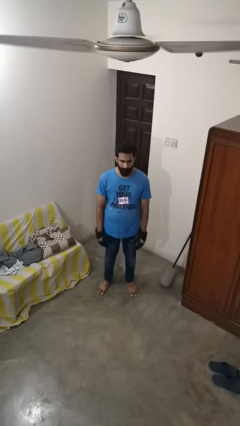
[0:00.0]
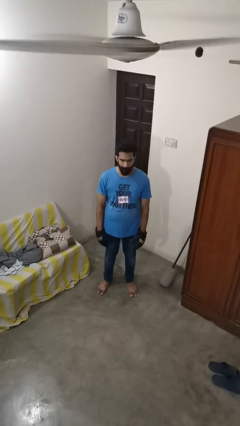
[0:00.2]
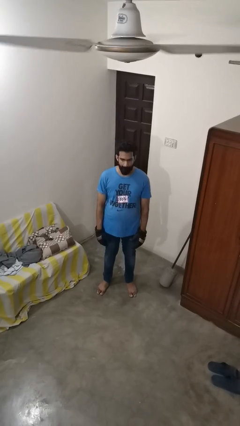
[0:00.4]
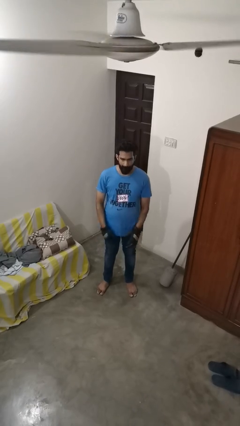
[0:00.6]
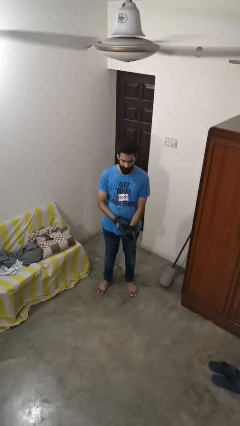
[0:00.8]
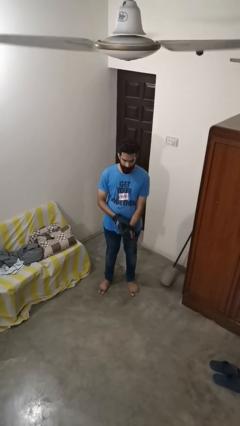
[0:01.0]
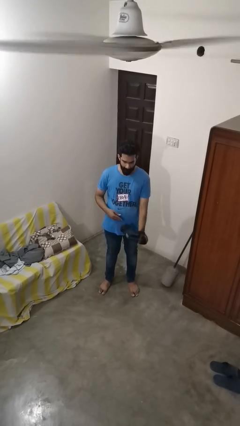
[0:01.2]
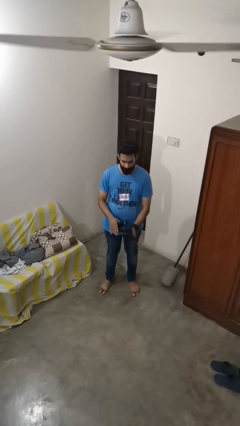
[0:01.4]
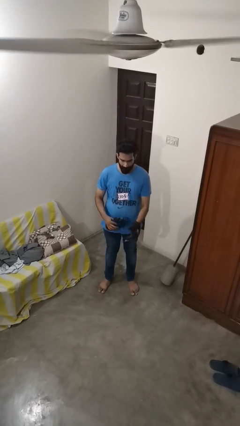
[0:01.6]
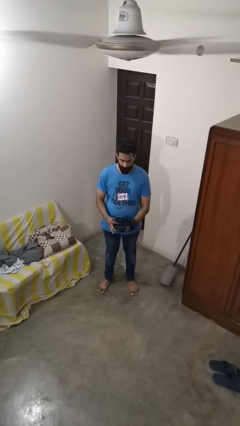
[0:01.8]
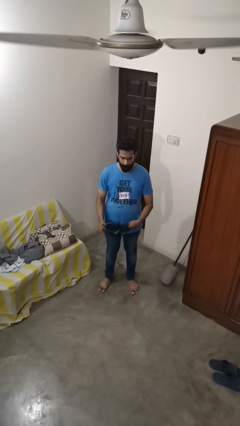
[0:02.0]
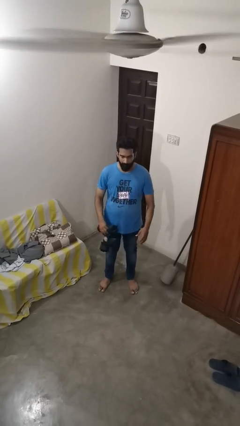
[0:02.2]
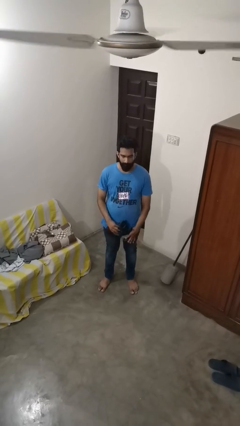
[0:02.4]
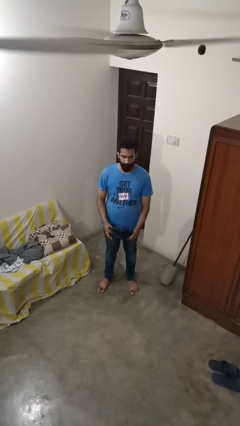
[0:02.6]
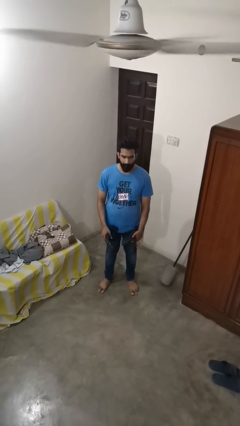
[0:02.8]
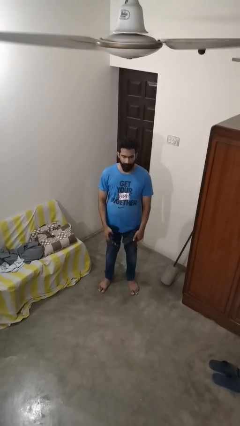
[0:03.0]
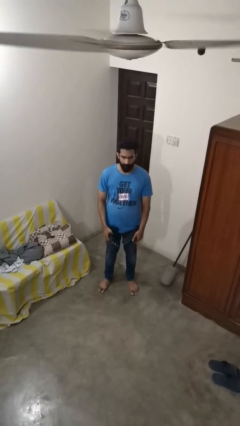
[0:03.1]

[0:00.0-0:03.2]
person takes off gloves

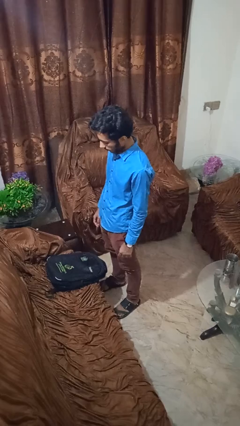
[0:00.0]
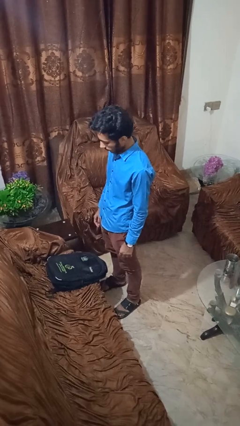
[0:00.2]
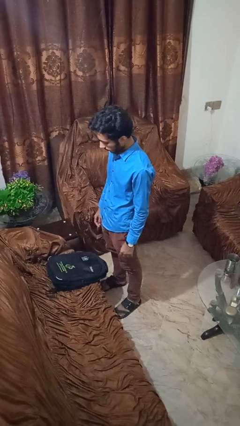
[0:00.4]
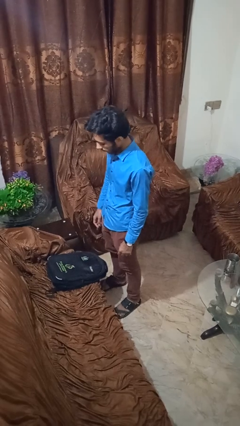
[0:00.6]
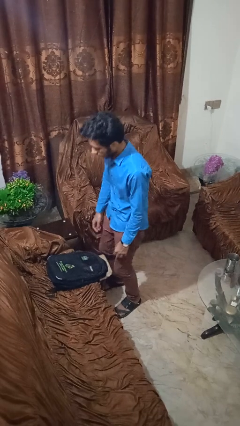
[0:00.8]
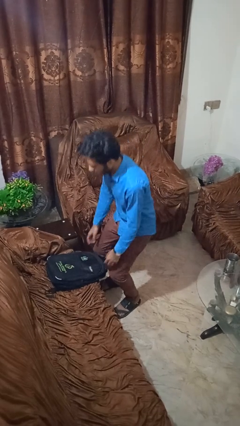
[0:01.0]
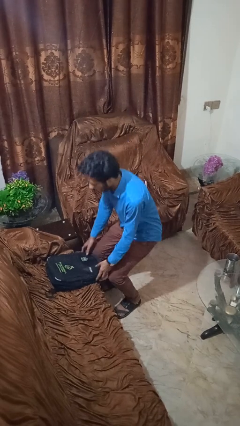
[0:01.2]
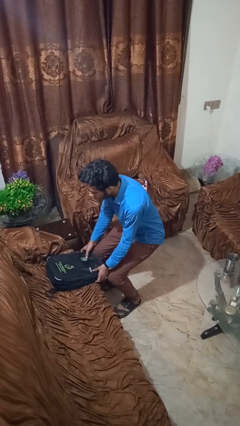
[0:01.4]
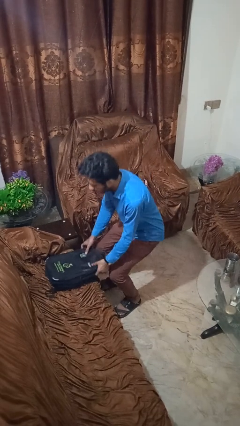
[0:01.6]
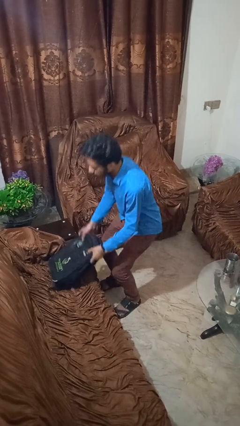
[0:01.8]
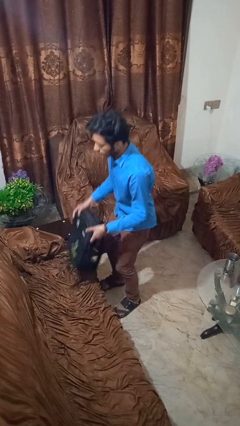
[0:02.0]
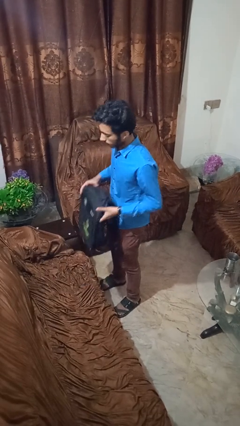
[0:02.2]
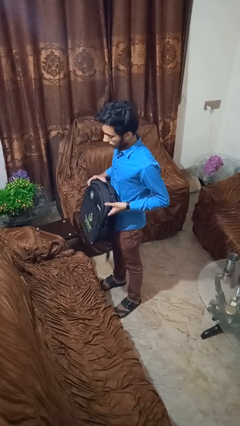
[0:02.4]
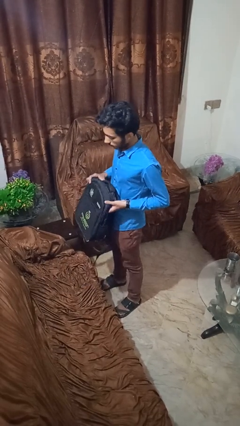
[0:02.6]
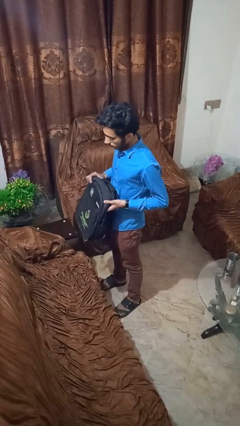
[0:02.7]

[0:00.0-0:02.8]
person picks up object from couch

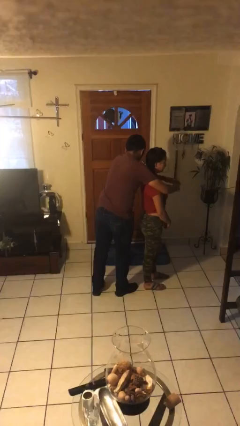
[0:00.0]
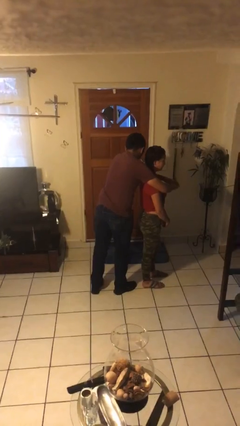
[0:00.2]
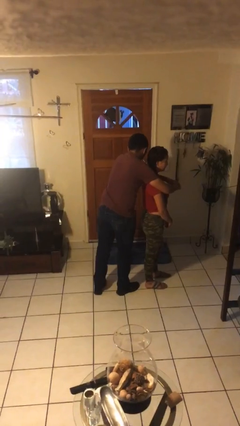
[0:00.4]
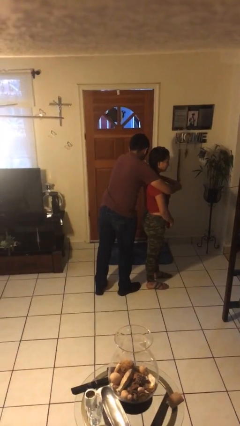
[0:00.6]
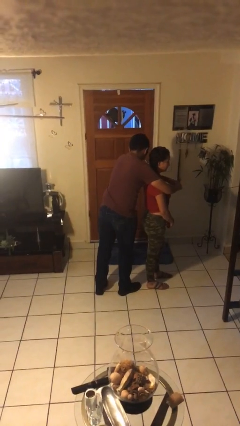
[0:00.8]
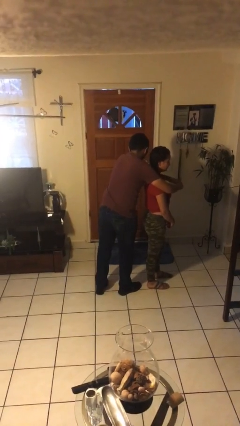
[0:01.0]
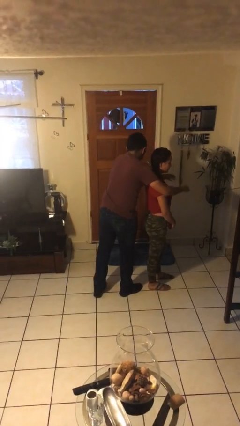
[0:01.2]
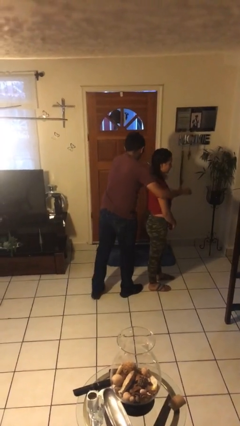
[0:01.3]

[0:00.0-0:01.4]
person hugs person from behind

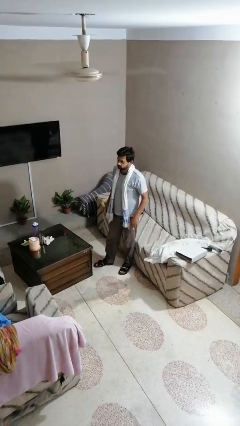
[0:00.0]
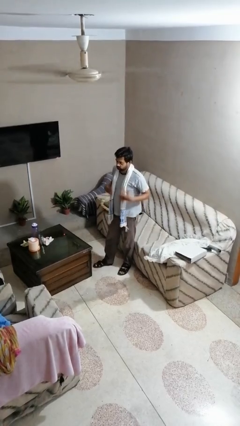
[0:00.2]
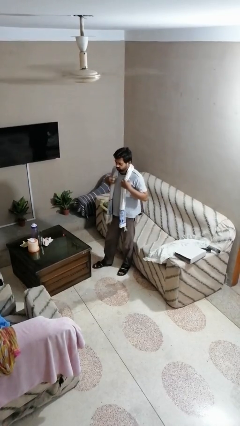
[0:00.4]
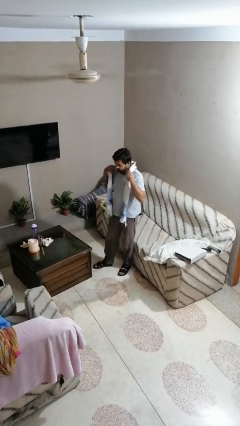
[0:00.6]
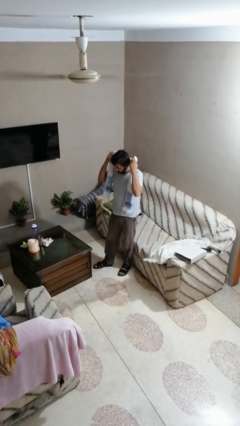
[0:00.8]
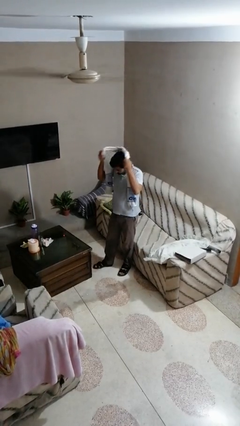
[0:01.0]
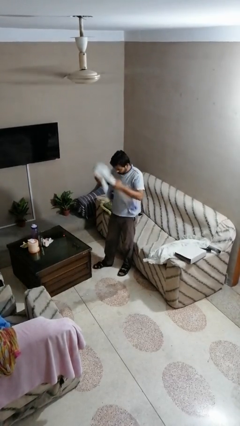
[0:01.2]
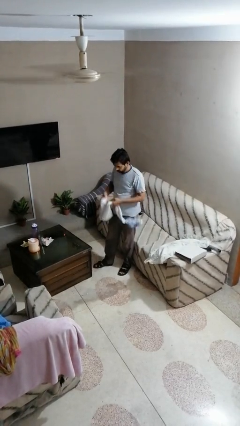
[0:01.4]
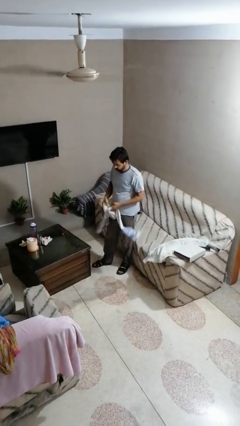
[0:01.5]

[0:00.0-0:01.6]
person takes off scarf

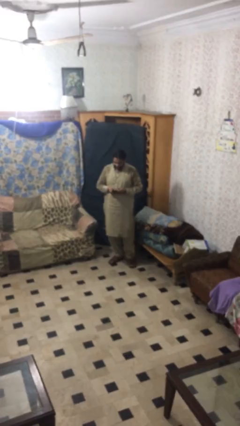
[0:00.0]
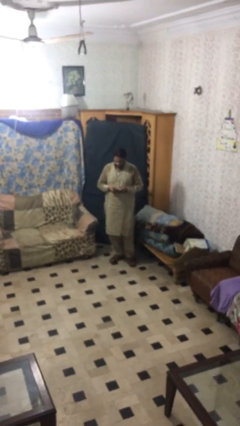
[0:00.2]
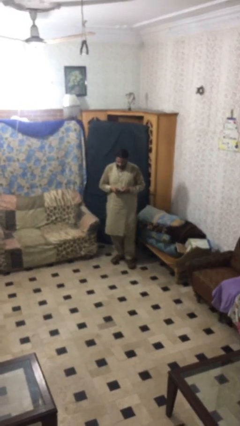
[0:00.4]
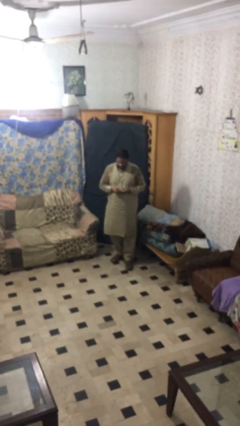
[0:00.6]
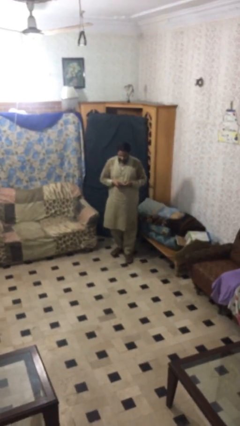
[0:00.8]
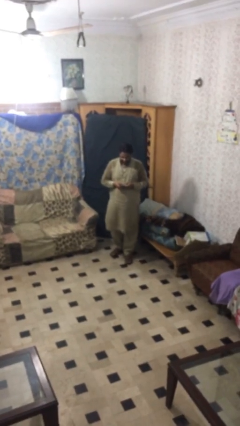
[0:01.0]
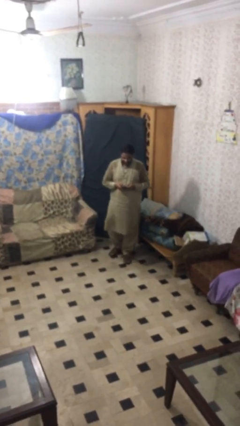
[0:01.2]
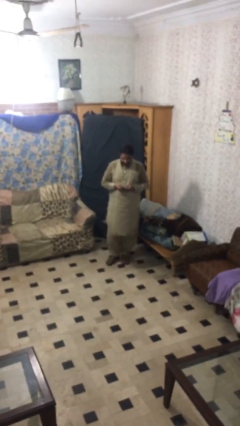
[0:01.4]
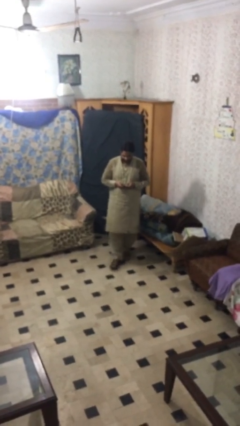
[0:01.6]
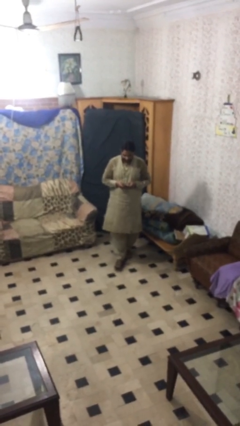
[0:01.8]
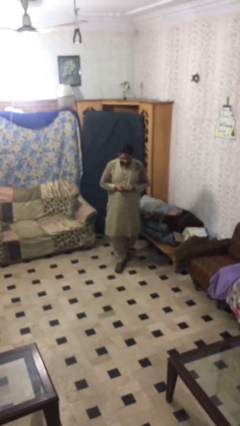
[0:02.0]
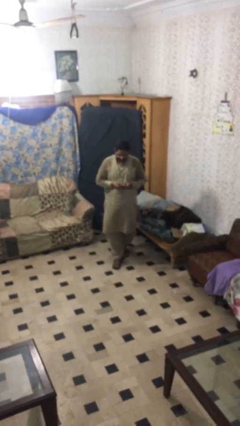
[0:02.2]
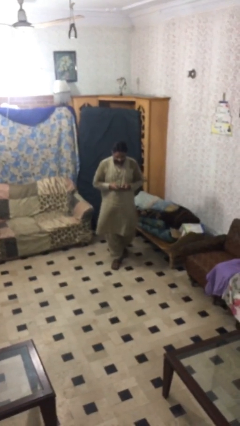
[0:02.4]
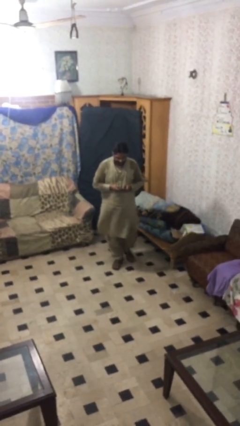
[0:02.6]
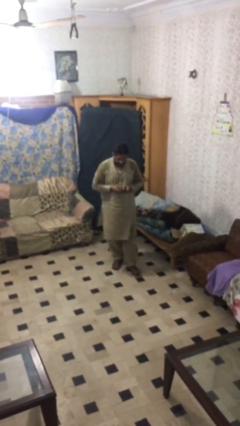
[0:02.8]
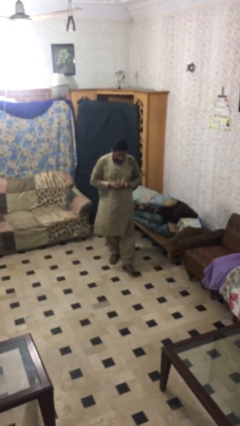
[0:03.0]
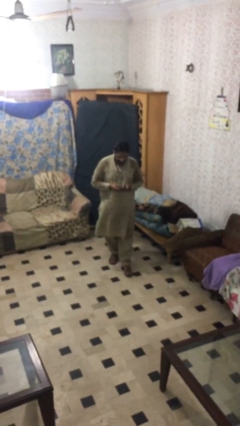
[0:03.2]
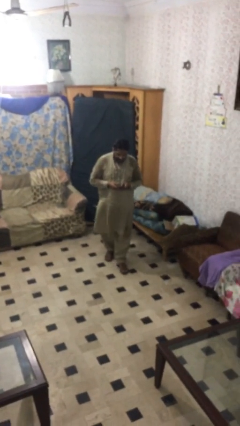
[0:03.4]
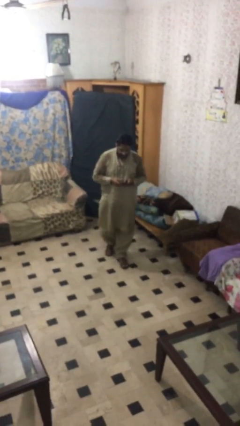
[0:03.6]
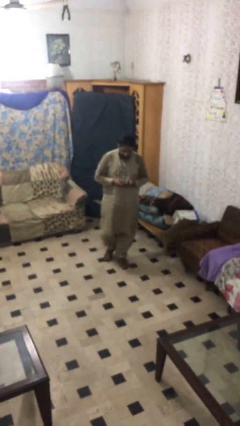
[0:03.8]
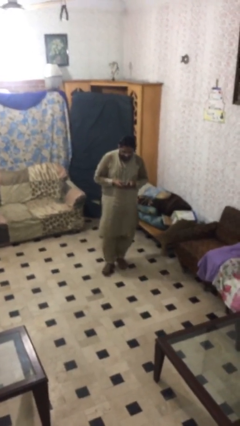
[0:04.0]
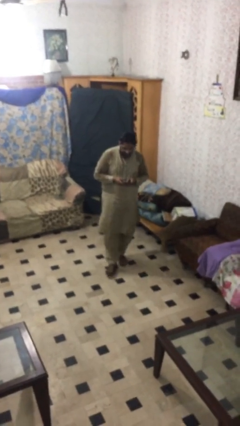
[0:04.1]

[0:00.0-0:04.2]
person texts on phone

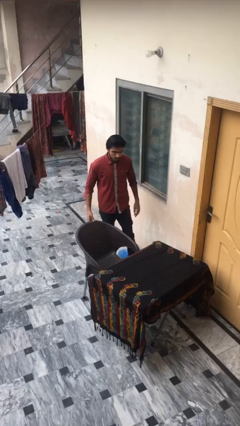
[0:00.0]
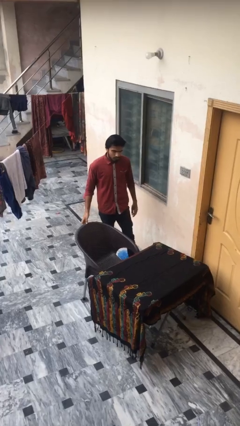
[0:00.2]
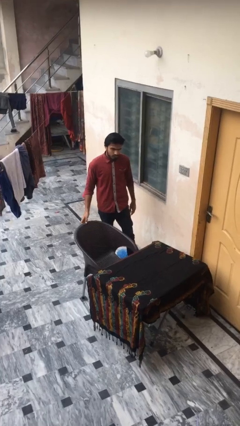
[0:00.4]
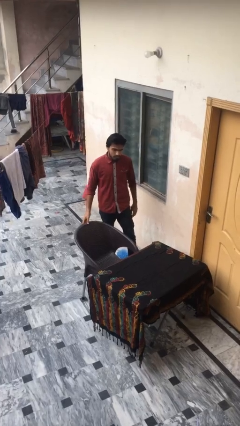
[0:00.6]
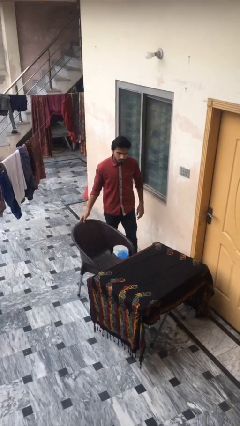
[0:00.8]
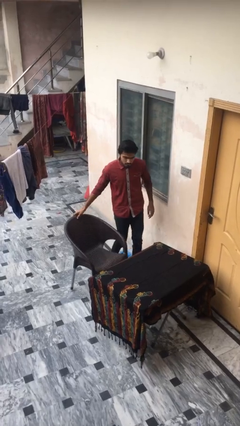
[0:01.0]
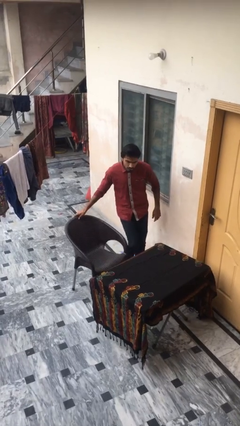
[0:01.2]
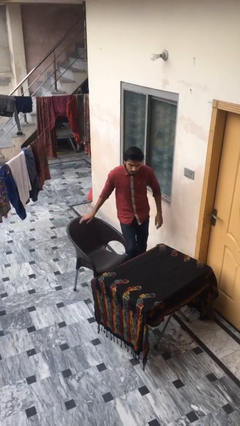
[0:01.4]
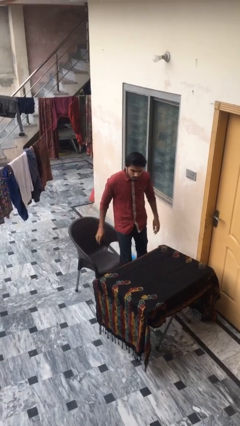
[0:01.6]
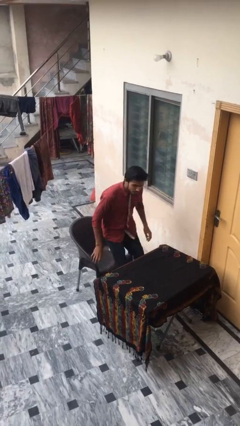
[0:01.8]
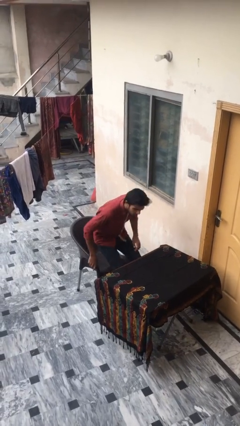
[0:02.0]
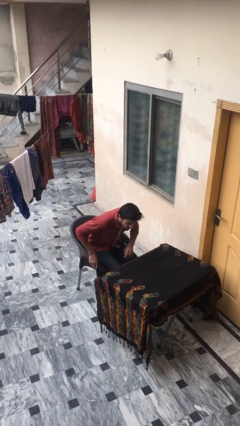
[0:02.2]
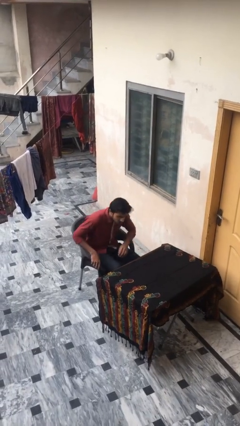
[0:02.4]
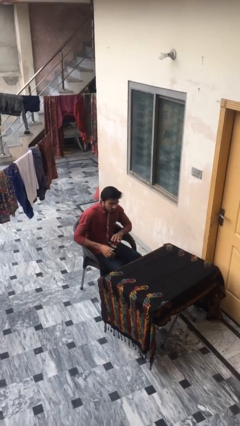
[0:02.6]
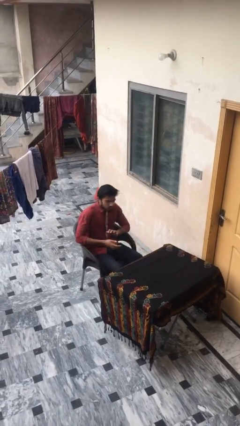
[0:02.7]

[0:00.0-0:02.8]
person sits down

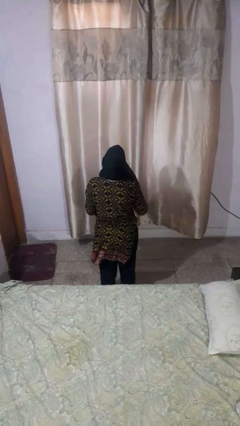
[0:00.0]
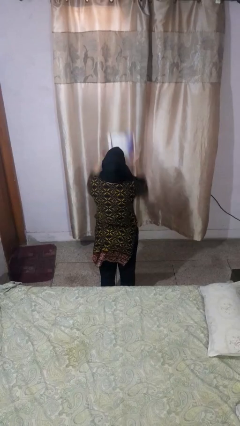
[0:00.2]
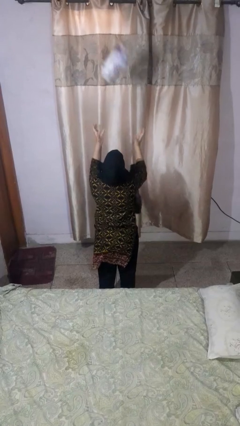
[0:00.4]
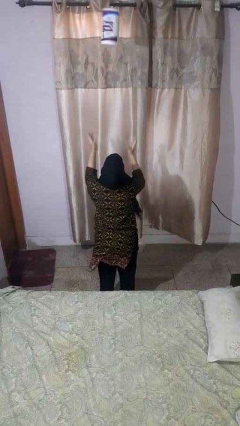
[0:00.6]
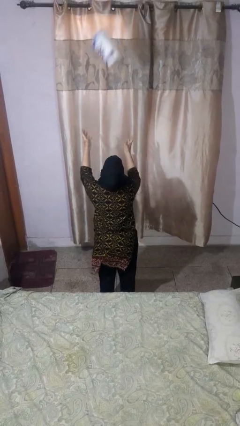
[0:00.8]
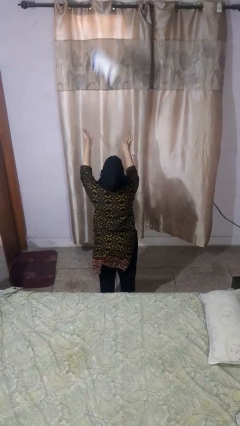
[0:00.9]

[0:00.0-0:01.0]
person drops object

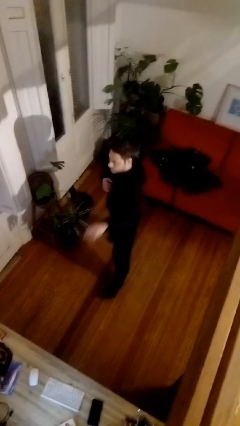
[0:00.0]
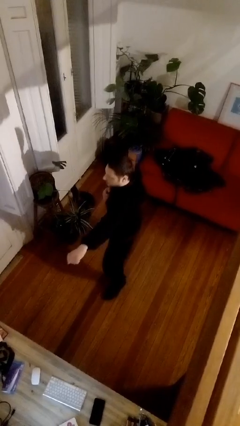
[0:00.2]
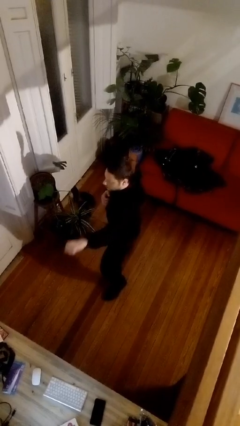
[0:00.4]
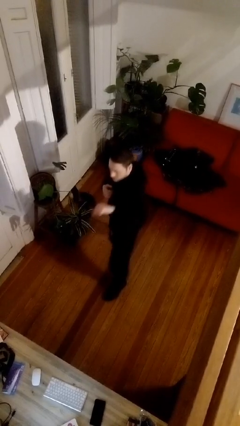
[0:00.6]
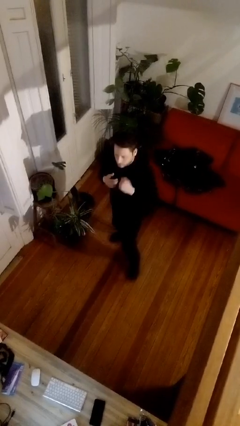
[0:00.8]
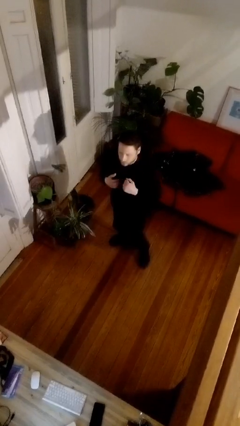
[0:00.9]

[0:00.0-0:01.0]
person punches
